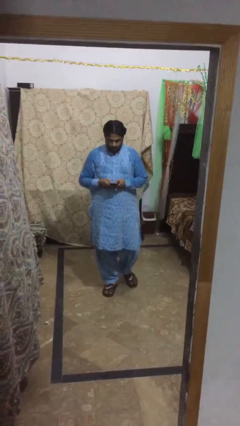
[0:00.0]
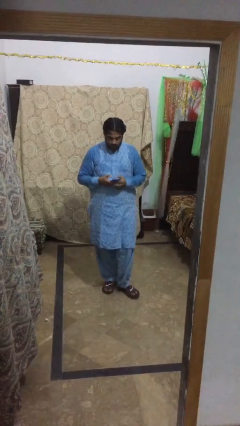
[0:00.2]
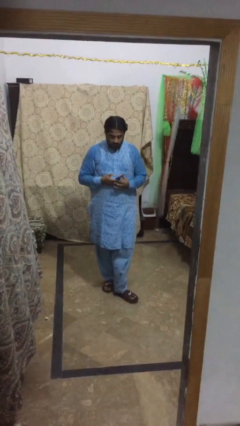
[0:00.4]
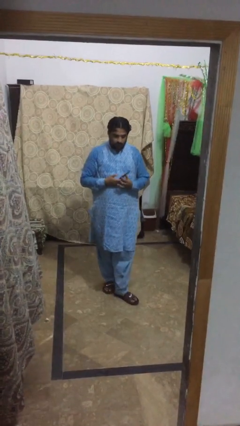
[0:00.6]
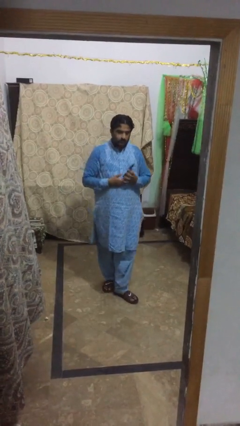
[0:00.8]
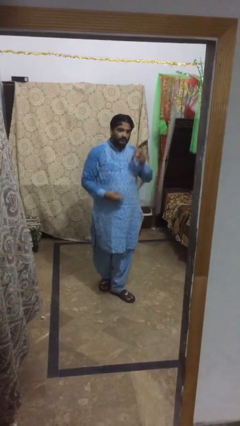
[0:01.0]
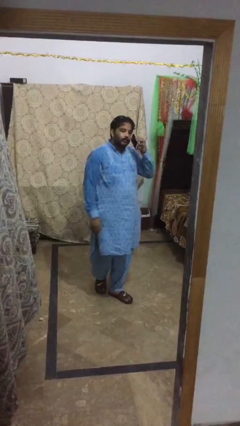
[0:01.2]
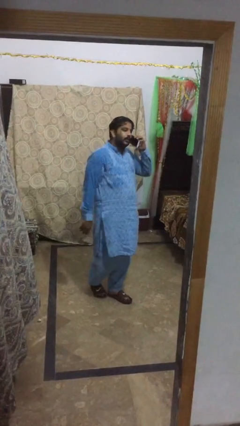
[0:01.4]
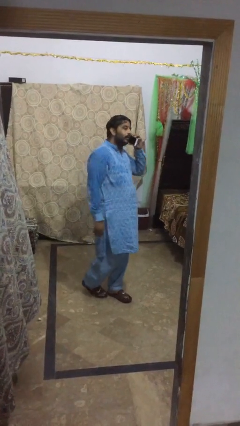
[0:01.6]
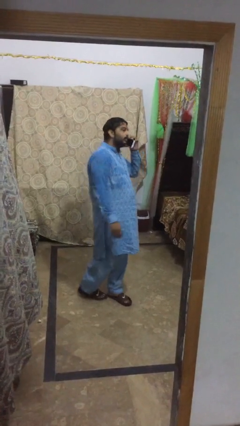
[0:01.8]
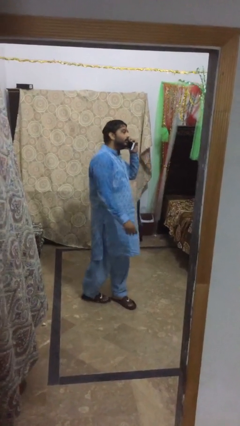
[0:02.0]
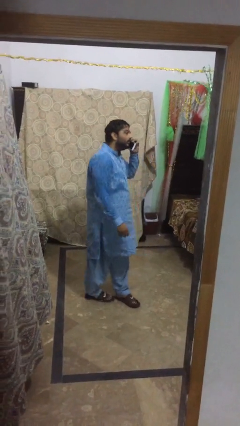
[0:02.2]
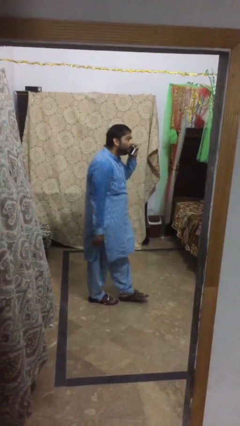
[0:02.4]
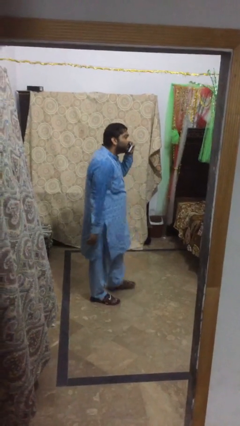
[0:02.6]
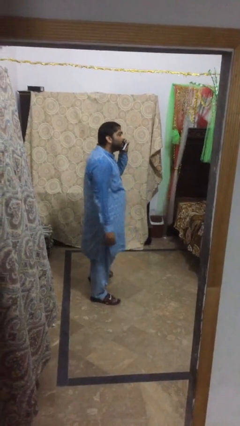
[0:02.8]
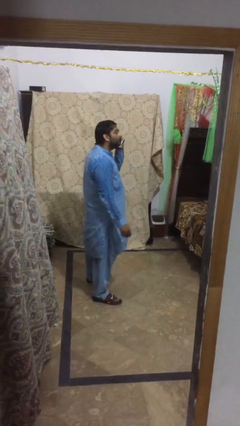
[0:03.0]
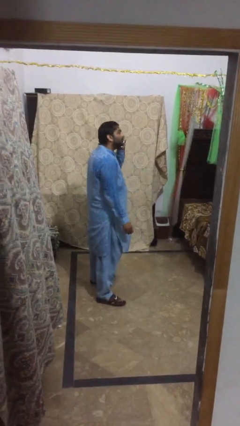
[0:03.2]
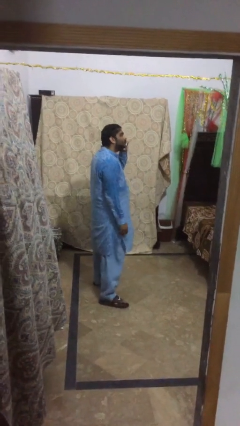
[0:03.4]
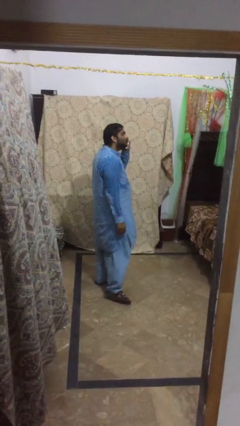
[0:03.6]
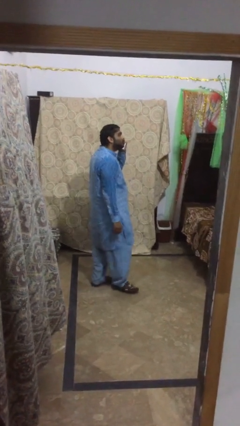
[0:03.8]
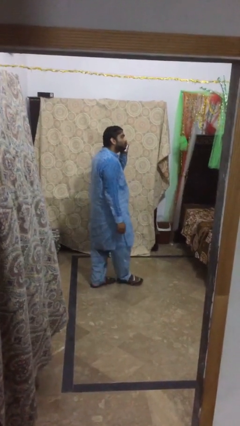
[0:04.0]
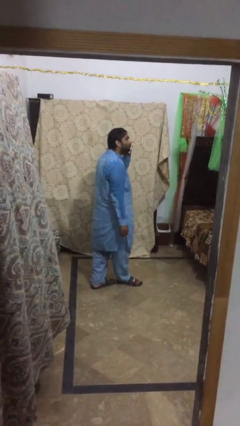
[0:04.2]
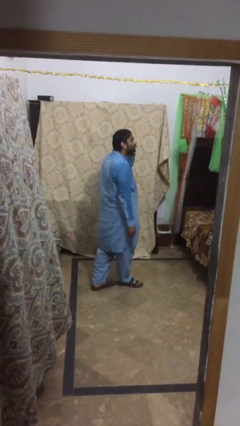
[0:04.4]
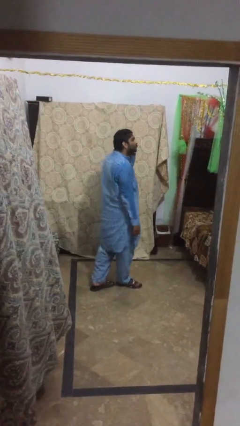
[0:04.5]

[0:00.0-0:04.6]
person talks on phone

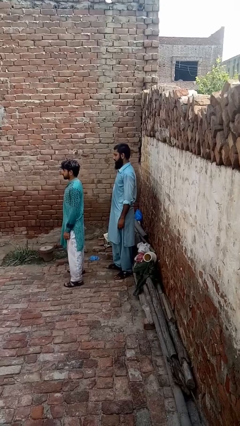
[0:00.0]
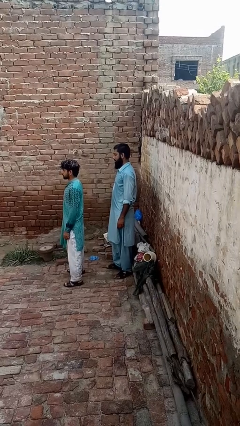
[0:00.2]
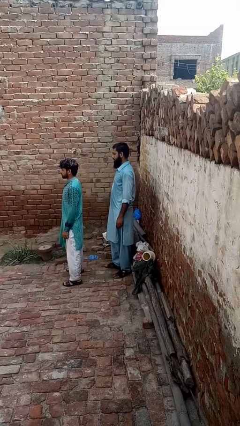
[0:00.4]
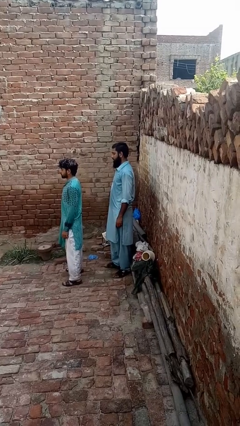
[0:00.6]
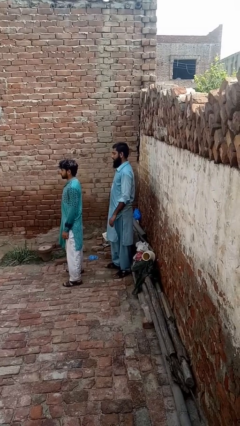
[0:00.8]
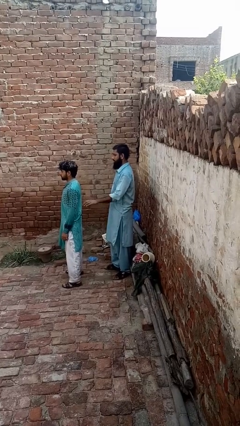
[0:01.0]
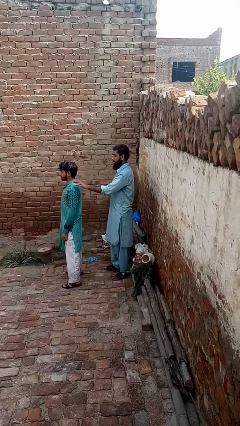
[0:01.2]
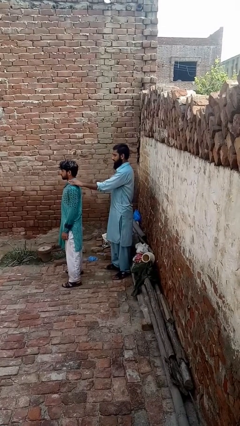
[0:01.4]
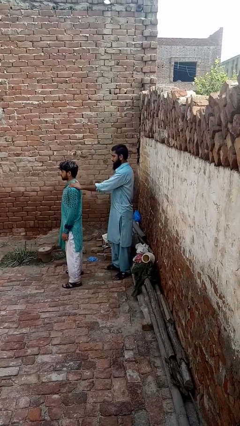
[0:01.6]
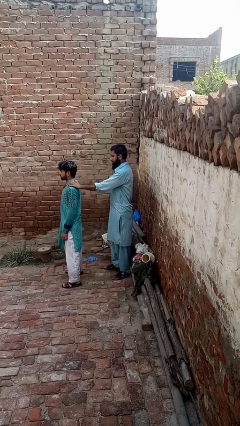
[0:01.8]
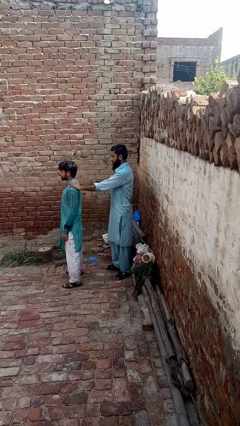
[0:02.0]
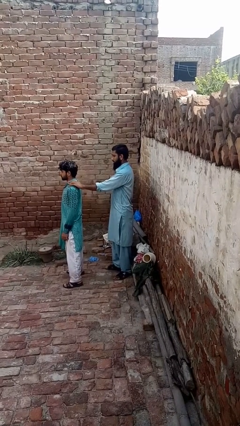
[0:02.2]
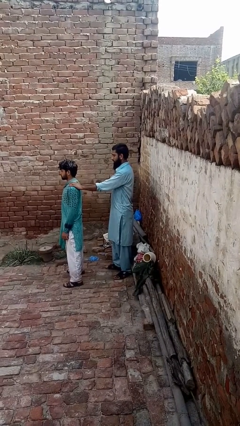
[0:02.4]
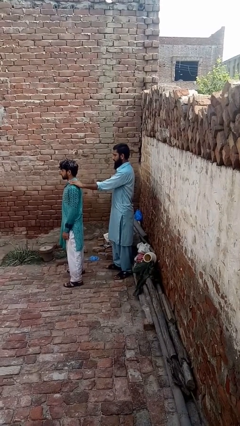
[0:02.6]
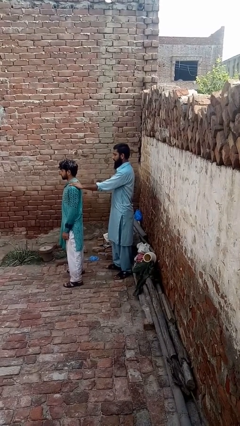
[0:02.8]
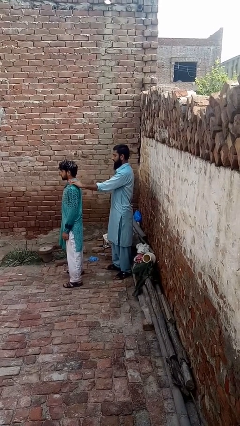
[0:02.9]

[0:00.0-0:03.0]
person touches back of person

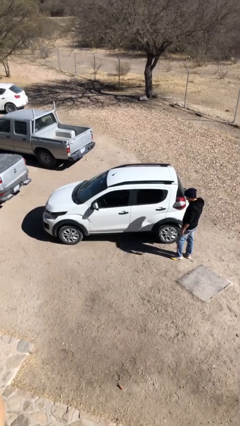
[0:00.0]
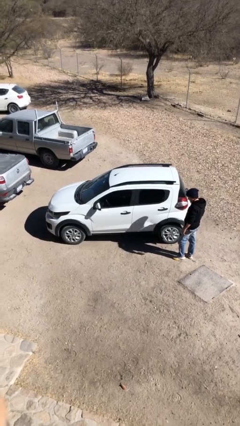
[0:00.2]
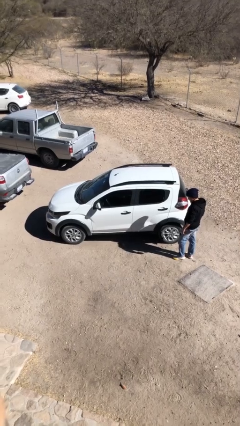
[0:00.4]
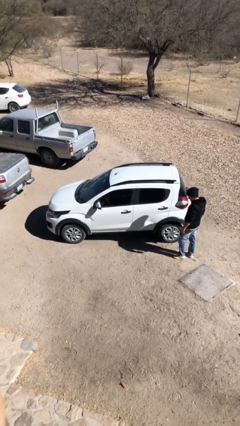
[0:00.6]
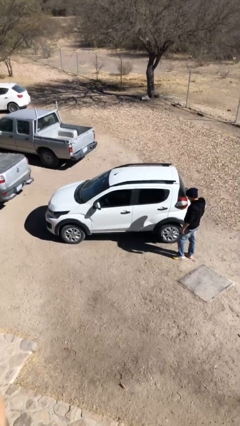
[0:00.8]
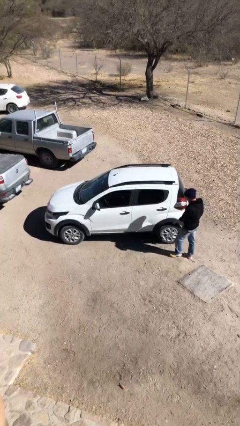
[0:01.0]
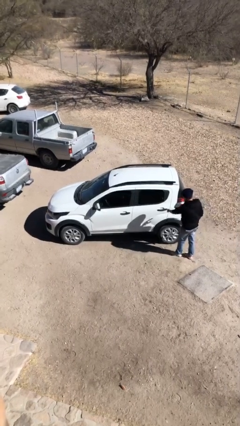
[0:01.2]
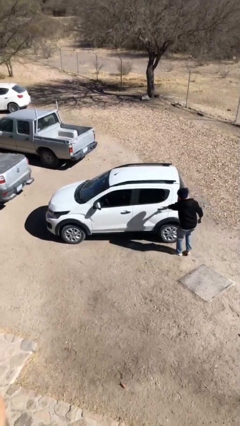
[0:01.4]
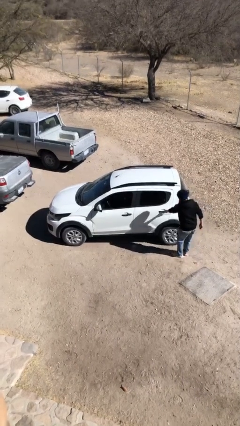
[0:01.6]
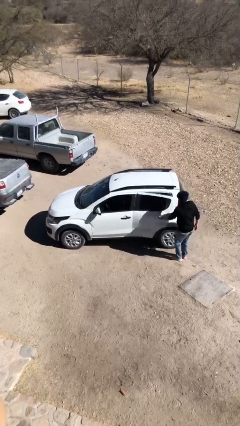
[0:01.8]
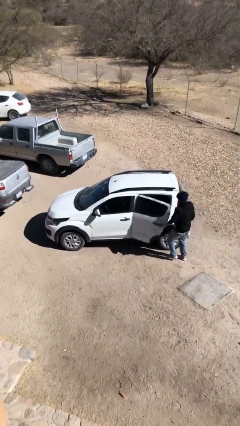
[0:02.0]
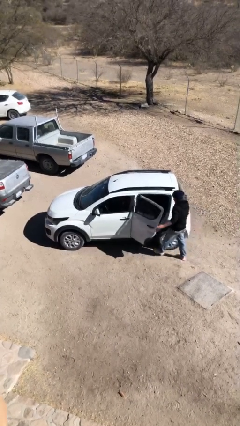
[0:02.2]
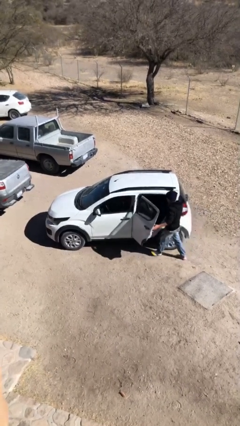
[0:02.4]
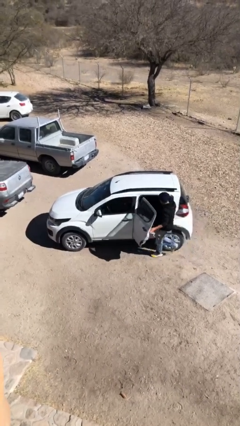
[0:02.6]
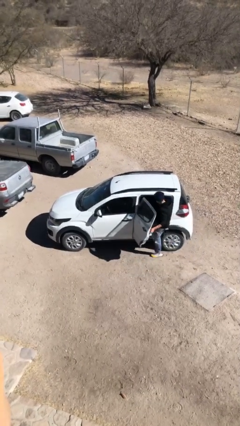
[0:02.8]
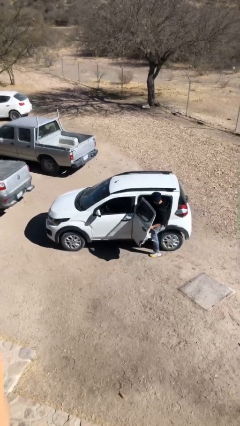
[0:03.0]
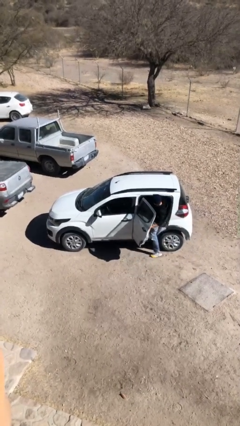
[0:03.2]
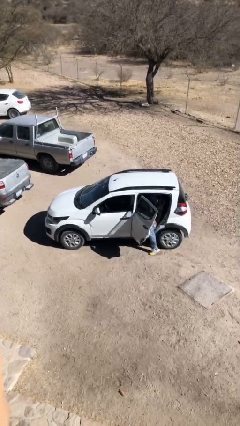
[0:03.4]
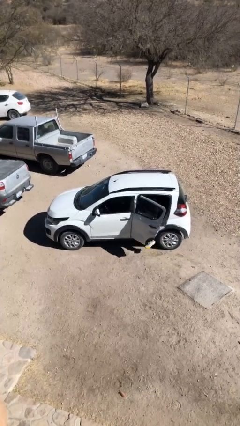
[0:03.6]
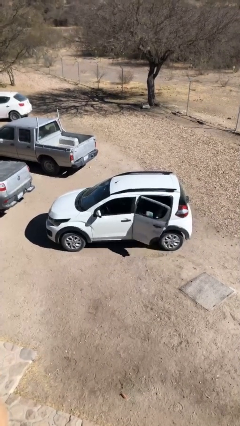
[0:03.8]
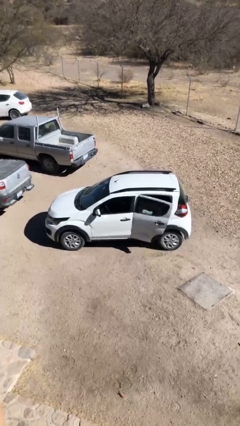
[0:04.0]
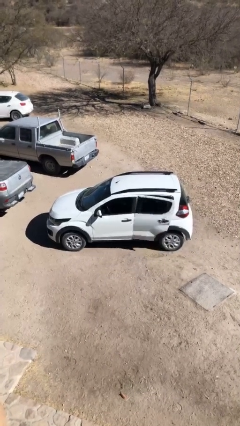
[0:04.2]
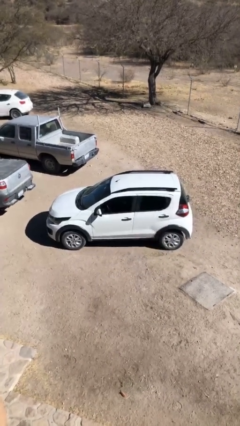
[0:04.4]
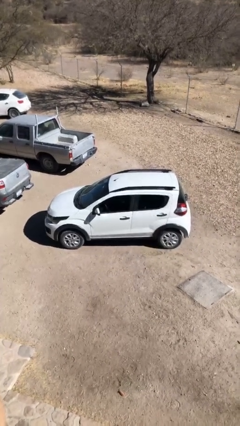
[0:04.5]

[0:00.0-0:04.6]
car picks up person

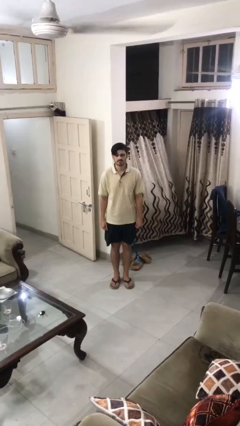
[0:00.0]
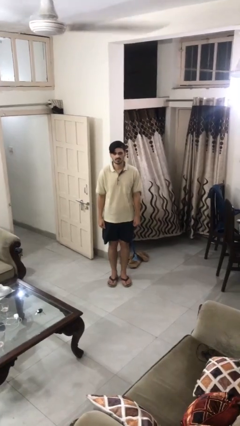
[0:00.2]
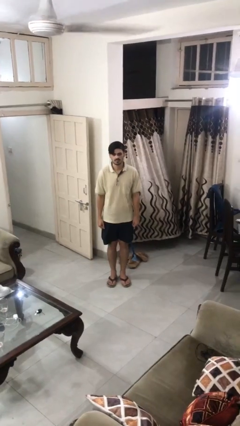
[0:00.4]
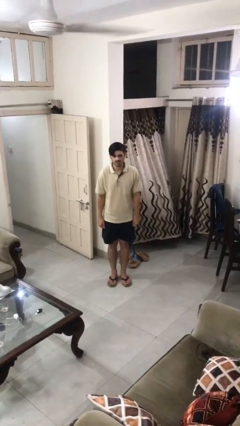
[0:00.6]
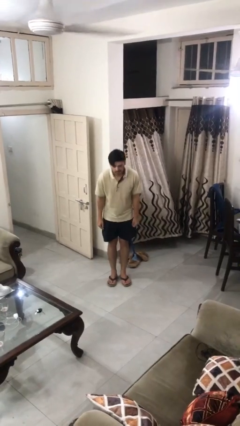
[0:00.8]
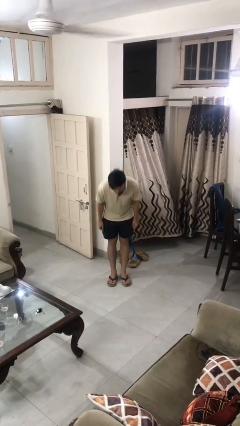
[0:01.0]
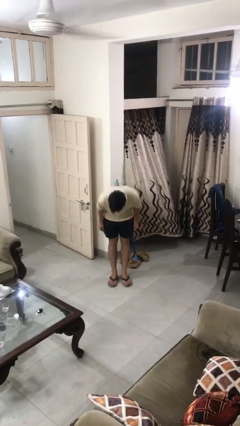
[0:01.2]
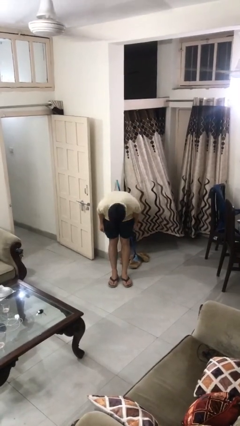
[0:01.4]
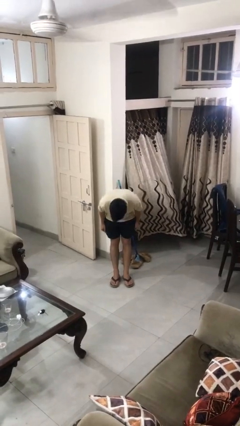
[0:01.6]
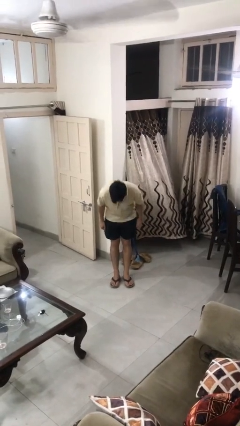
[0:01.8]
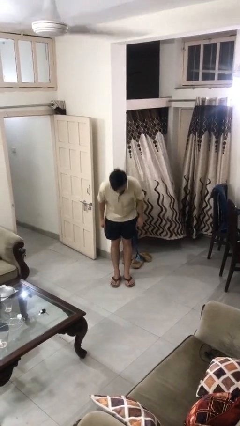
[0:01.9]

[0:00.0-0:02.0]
person bows

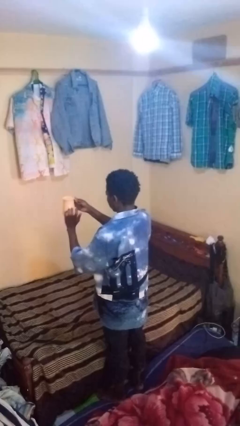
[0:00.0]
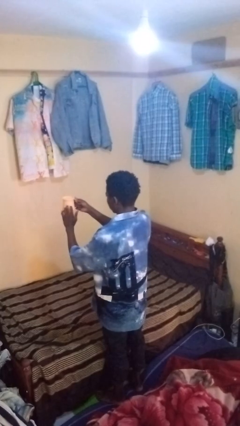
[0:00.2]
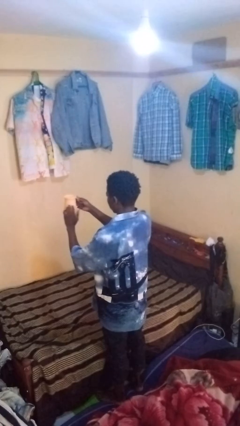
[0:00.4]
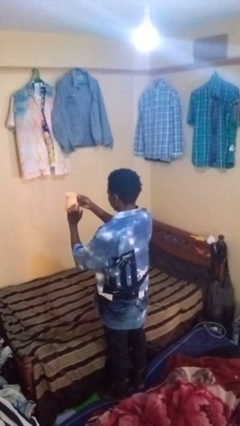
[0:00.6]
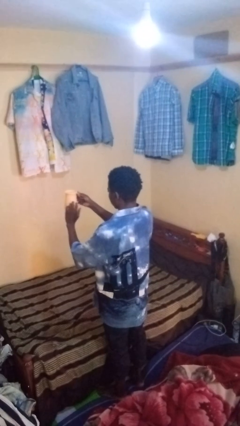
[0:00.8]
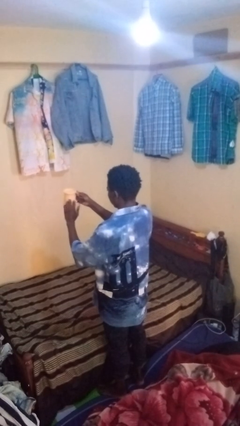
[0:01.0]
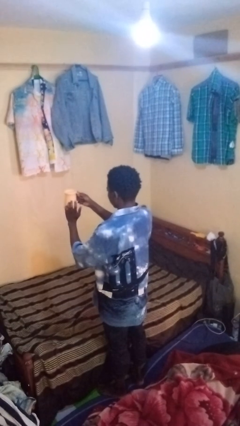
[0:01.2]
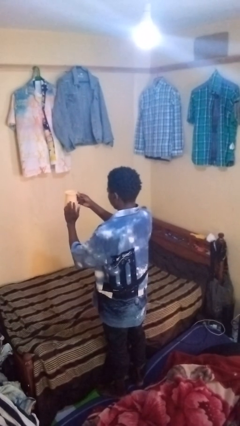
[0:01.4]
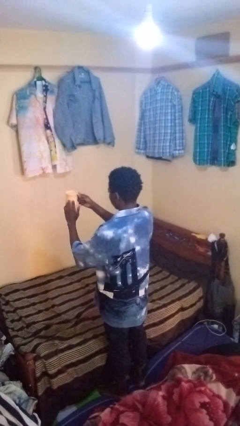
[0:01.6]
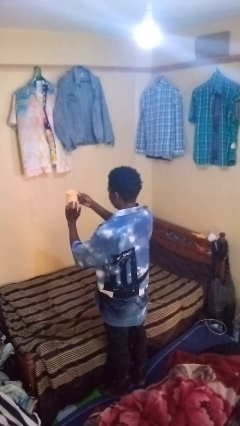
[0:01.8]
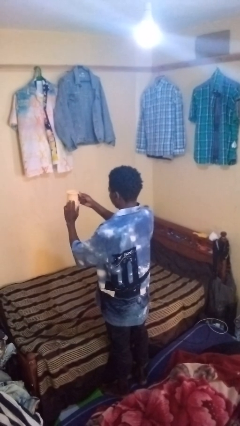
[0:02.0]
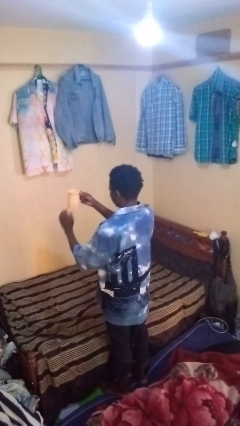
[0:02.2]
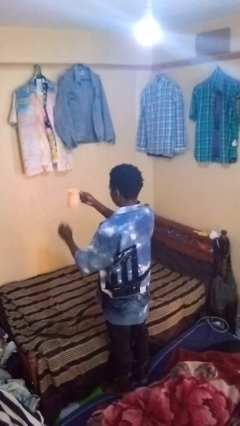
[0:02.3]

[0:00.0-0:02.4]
person taps object with finger

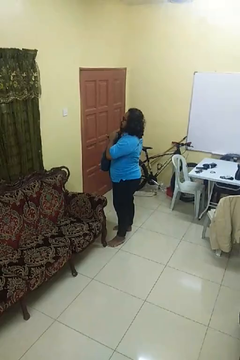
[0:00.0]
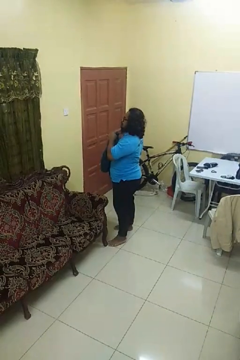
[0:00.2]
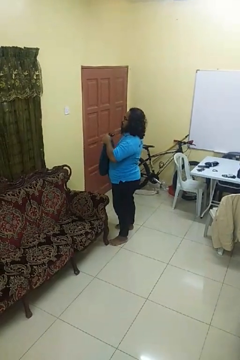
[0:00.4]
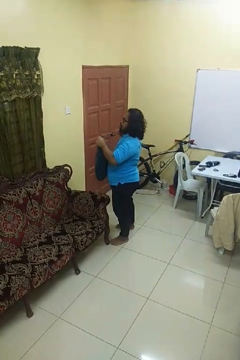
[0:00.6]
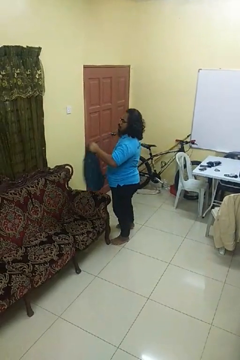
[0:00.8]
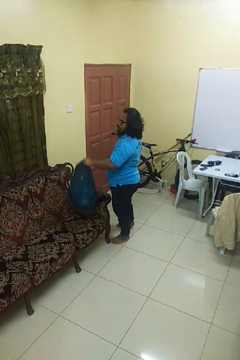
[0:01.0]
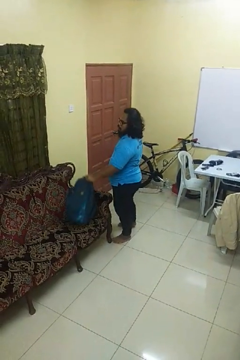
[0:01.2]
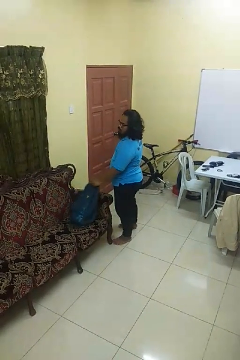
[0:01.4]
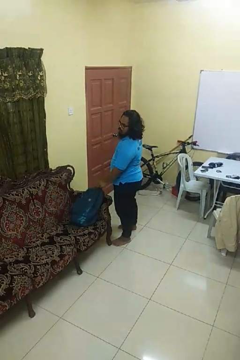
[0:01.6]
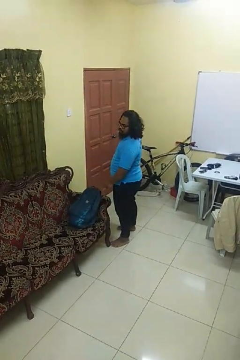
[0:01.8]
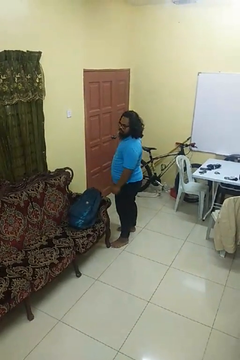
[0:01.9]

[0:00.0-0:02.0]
person puts down object on couch
